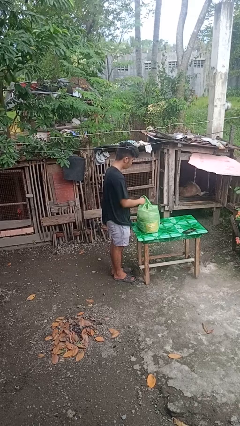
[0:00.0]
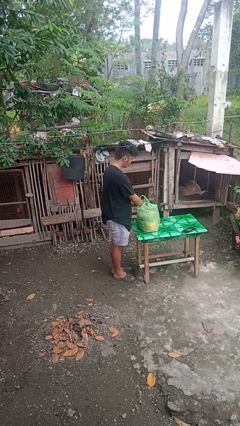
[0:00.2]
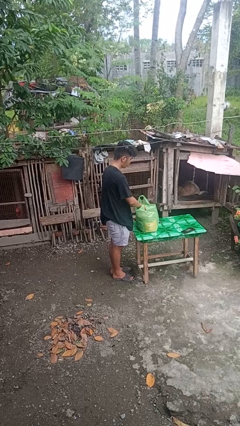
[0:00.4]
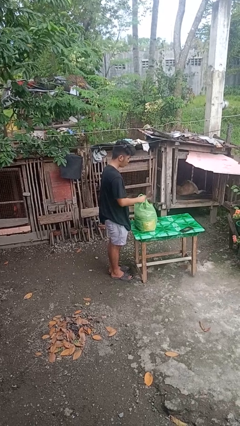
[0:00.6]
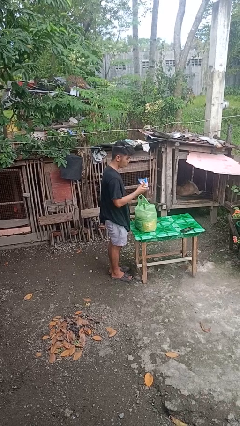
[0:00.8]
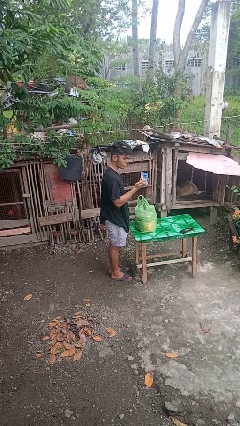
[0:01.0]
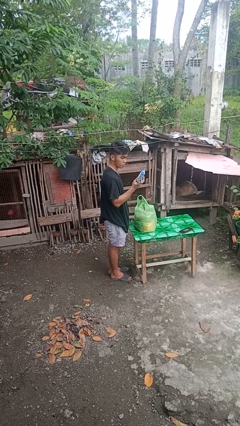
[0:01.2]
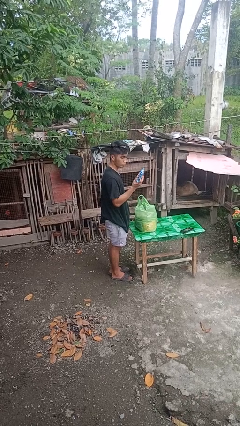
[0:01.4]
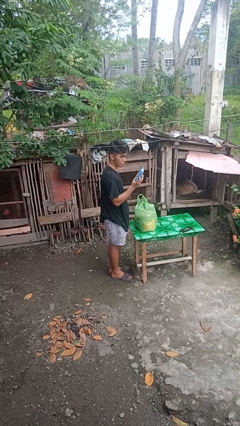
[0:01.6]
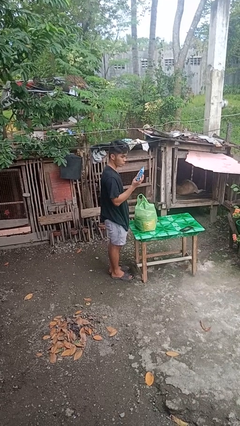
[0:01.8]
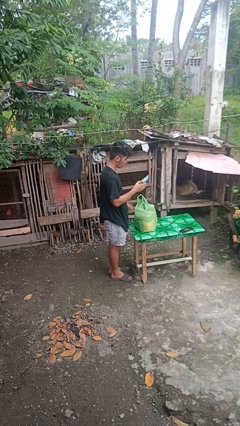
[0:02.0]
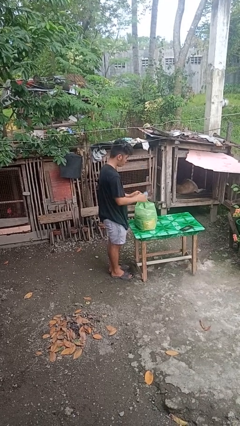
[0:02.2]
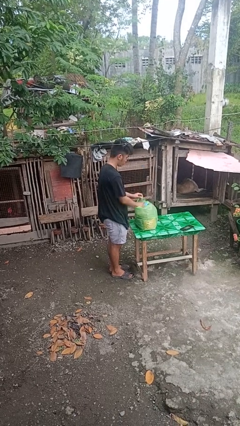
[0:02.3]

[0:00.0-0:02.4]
person takes object from bag

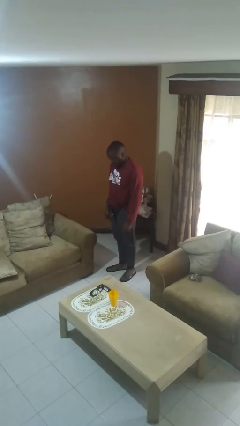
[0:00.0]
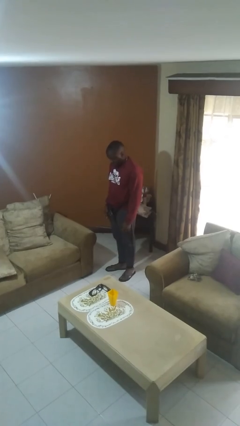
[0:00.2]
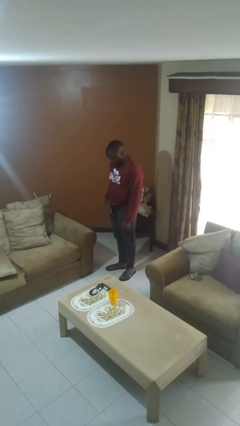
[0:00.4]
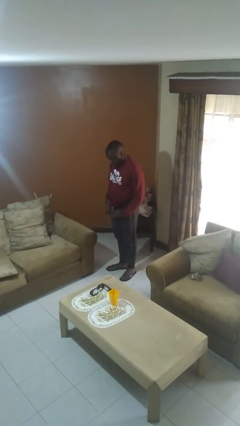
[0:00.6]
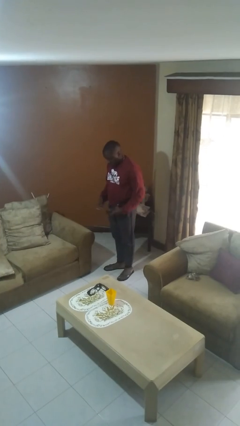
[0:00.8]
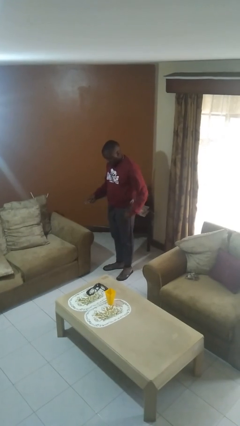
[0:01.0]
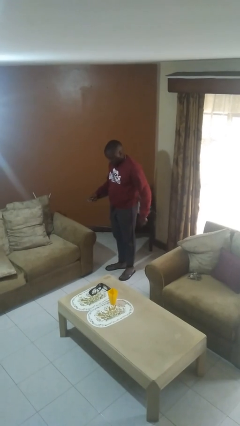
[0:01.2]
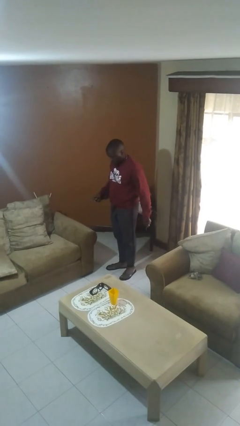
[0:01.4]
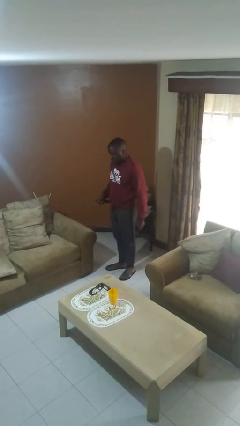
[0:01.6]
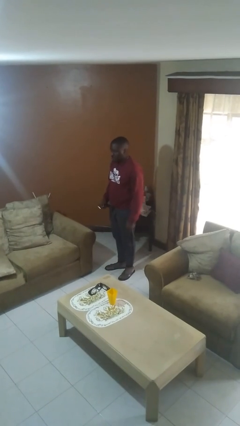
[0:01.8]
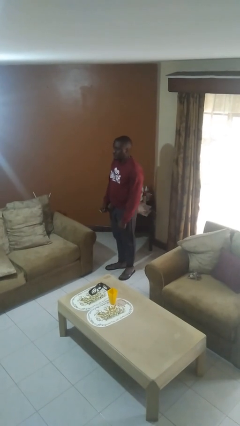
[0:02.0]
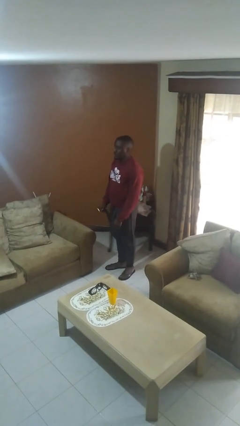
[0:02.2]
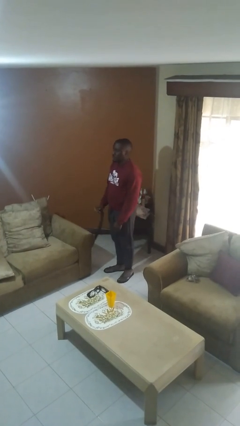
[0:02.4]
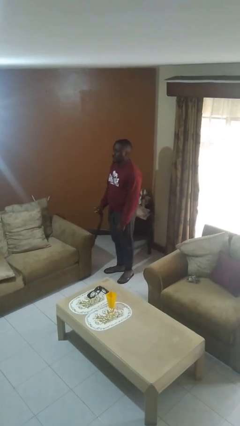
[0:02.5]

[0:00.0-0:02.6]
person takes off belt

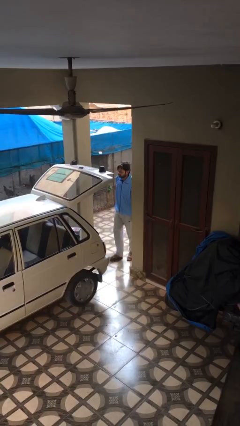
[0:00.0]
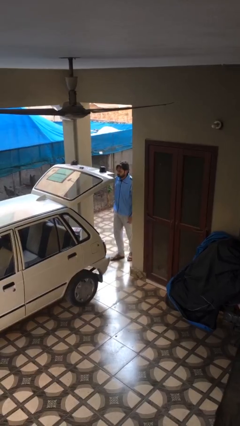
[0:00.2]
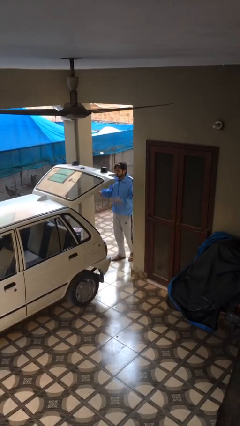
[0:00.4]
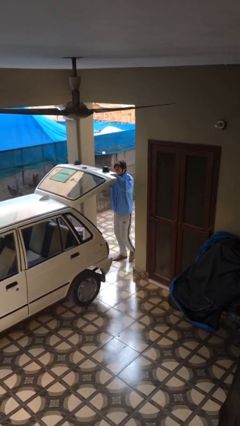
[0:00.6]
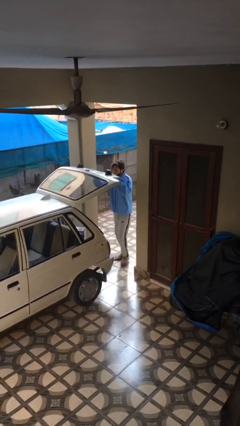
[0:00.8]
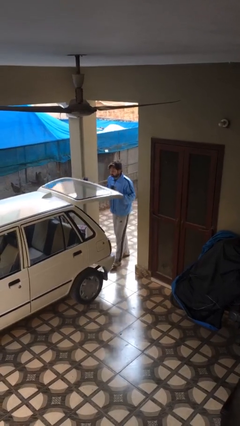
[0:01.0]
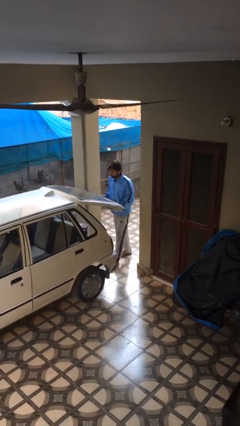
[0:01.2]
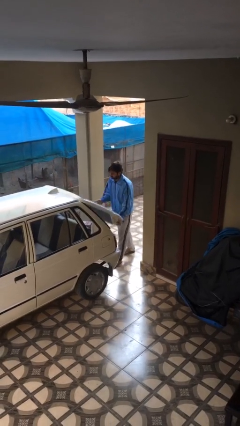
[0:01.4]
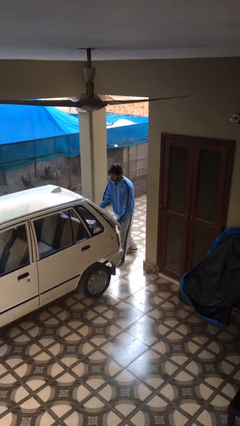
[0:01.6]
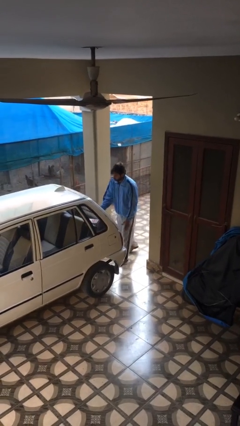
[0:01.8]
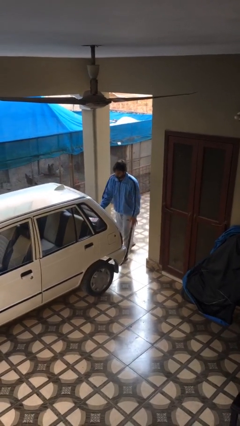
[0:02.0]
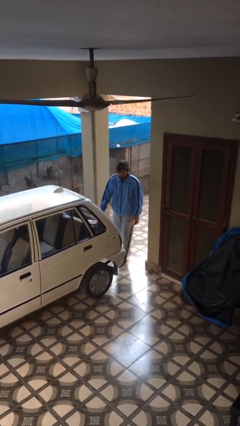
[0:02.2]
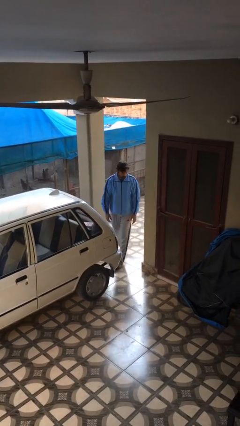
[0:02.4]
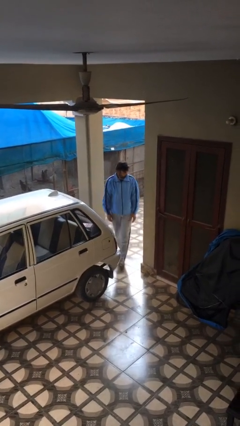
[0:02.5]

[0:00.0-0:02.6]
person closes car trunk

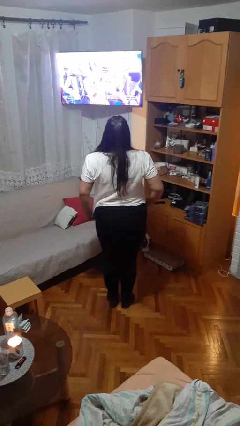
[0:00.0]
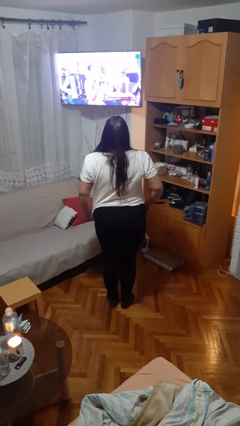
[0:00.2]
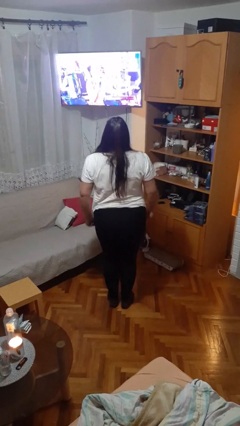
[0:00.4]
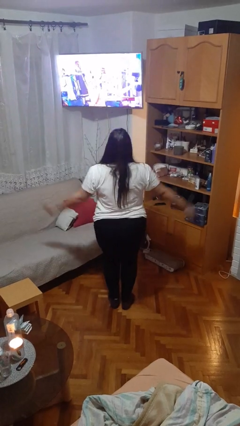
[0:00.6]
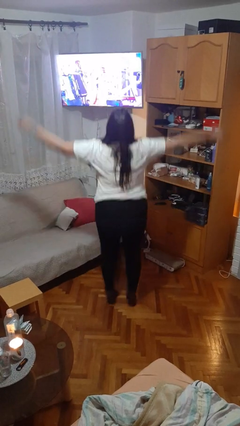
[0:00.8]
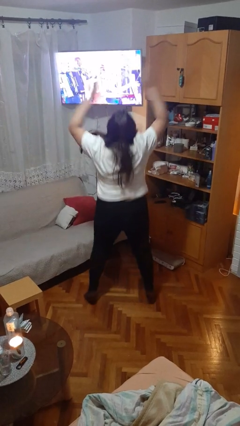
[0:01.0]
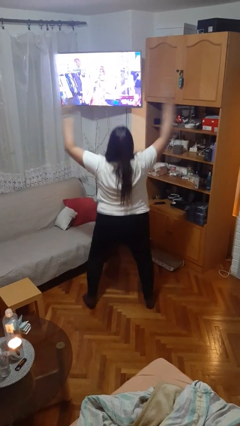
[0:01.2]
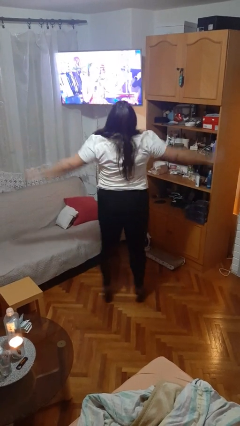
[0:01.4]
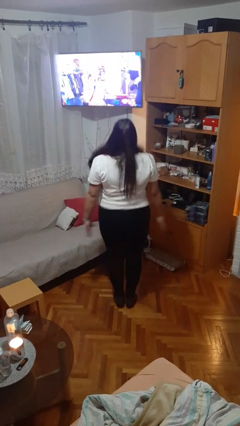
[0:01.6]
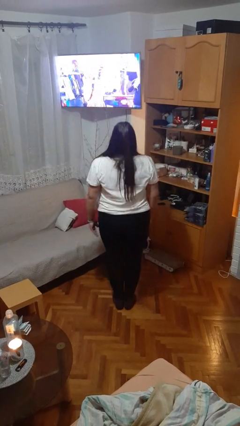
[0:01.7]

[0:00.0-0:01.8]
person exercises with jumping jacks

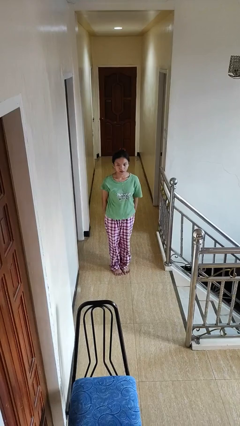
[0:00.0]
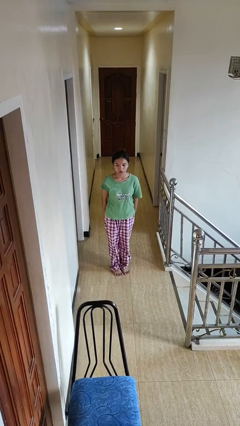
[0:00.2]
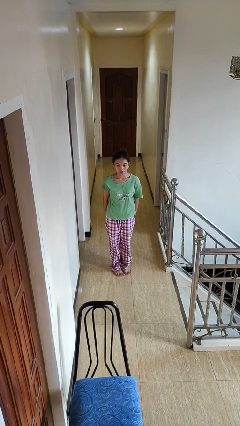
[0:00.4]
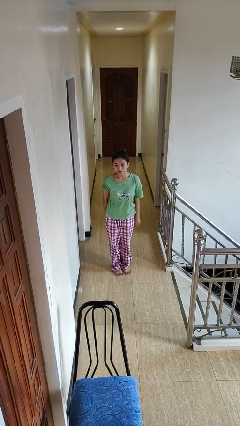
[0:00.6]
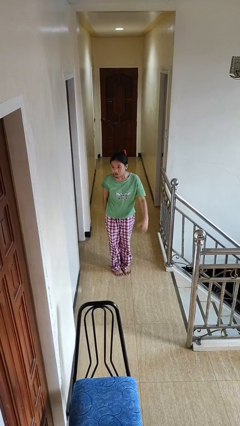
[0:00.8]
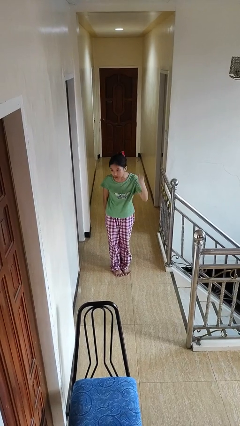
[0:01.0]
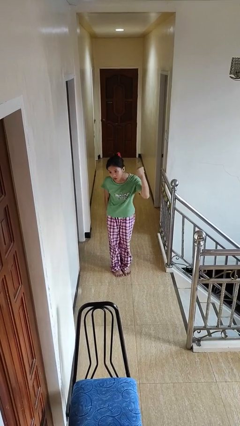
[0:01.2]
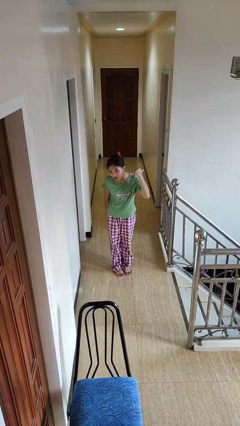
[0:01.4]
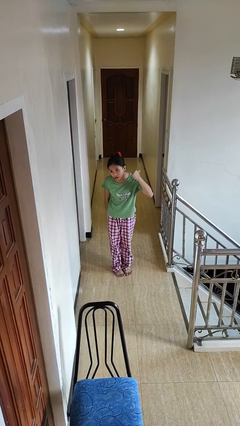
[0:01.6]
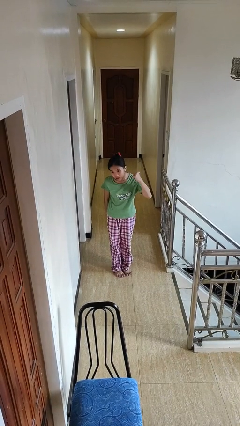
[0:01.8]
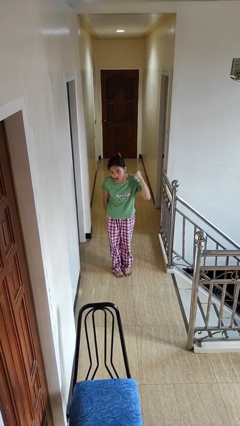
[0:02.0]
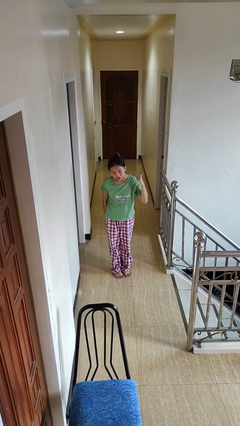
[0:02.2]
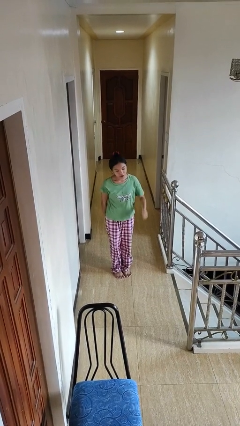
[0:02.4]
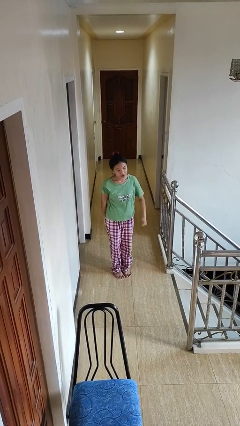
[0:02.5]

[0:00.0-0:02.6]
person gestures behind me

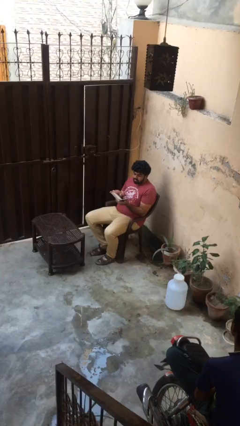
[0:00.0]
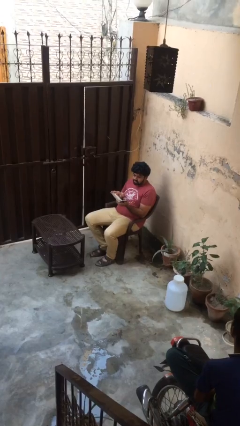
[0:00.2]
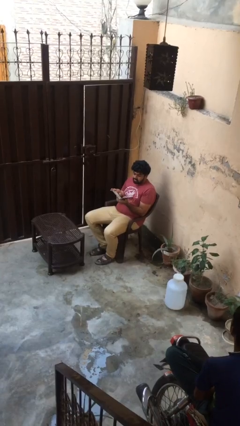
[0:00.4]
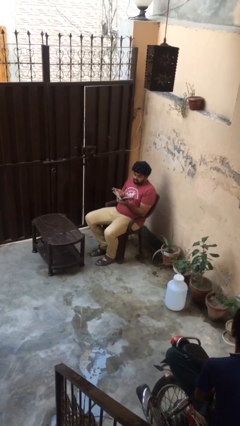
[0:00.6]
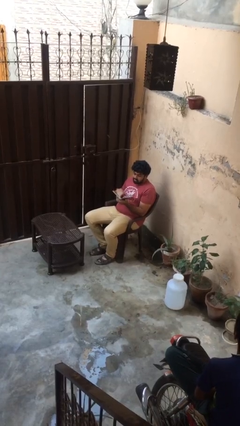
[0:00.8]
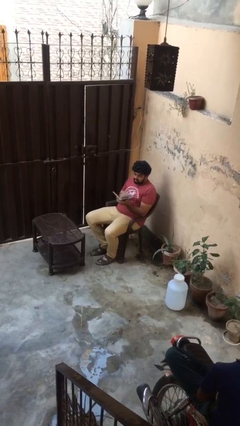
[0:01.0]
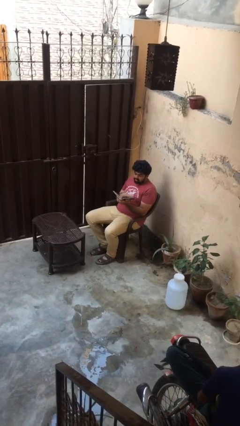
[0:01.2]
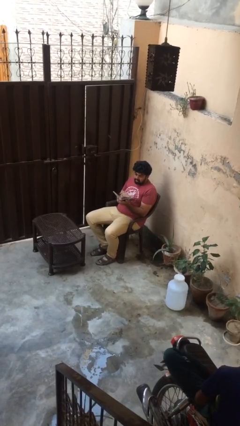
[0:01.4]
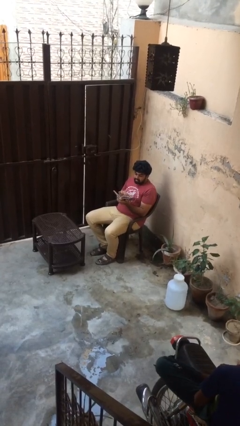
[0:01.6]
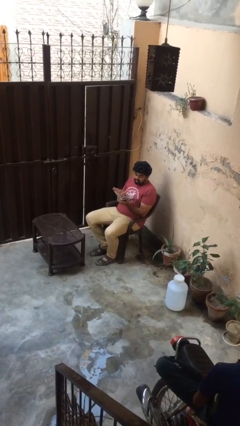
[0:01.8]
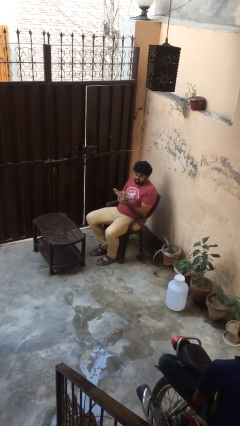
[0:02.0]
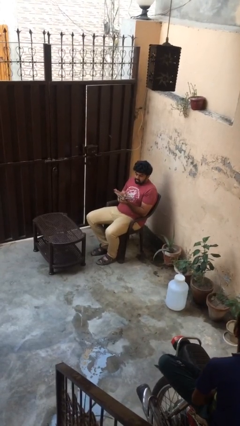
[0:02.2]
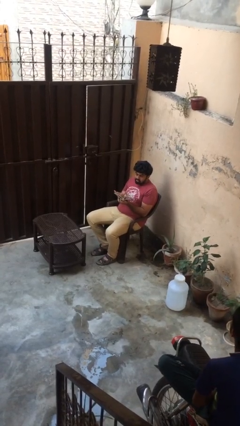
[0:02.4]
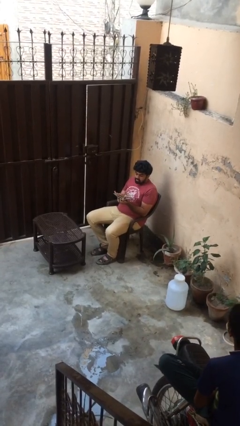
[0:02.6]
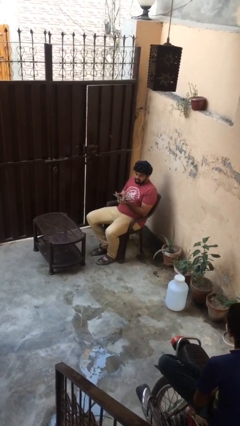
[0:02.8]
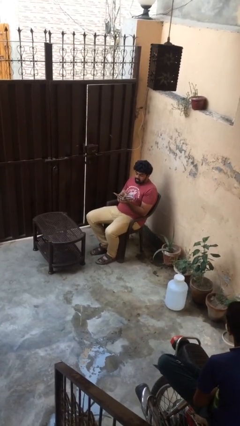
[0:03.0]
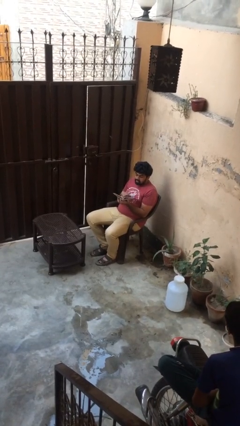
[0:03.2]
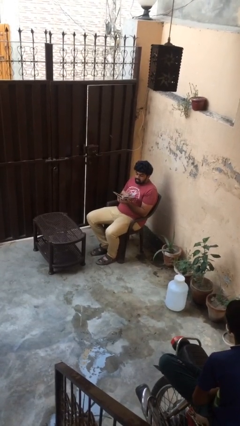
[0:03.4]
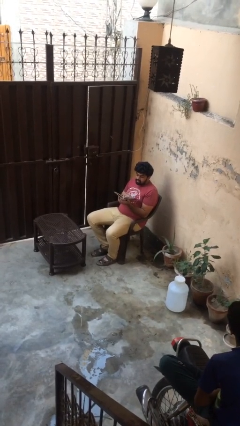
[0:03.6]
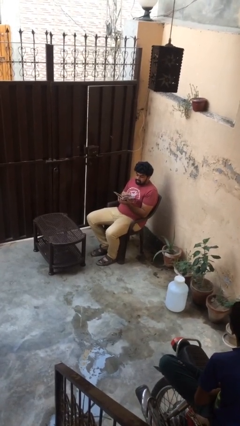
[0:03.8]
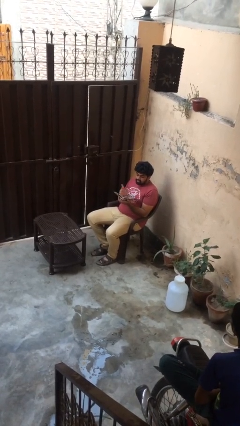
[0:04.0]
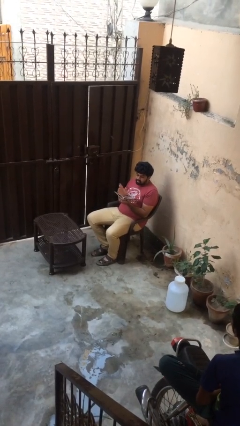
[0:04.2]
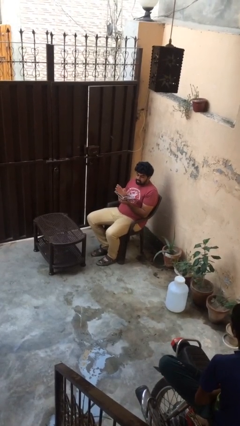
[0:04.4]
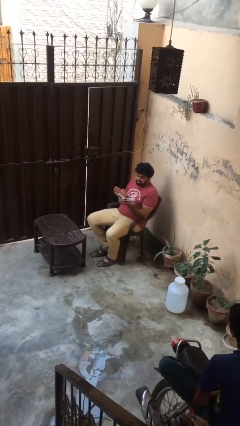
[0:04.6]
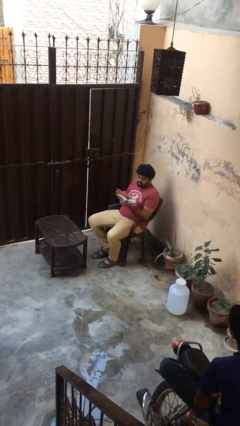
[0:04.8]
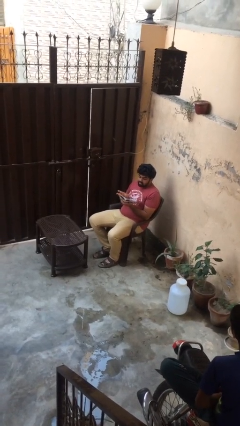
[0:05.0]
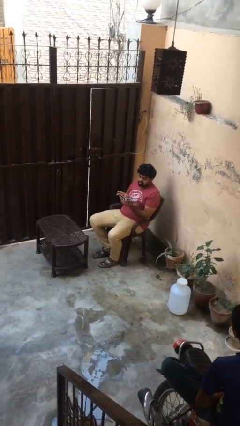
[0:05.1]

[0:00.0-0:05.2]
person reads document

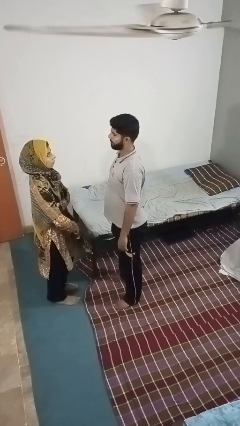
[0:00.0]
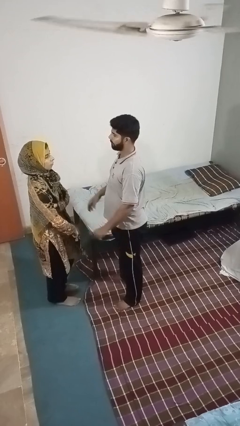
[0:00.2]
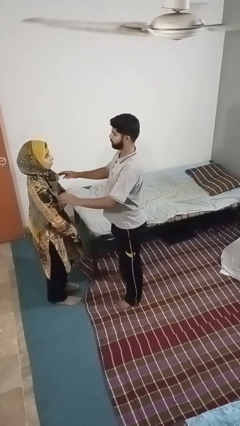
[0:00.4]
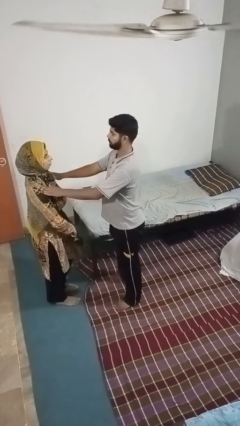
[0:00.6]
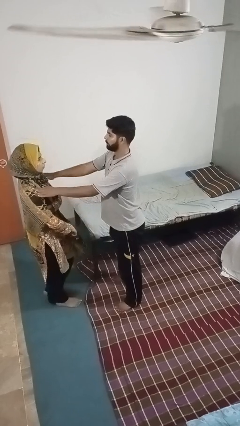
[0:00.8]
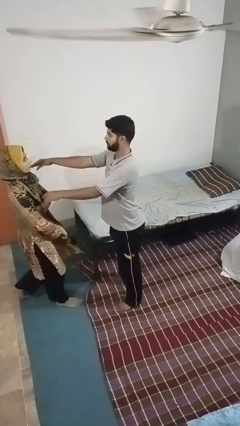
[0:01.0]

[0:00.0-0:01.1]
person shoves person
